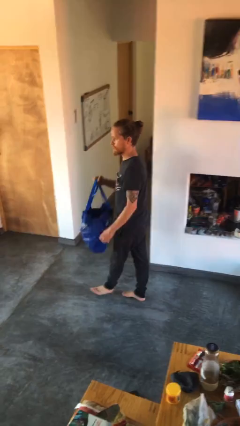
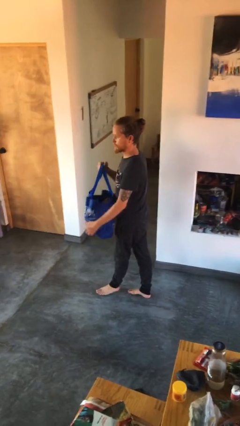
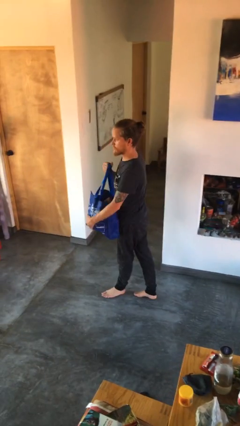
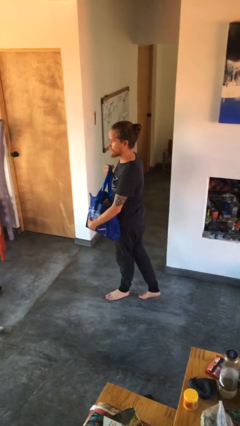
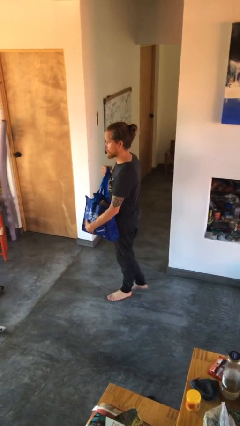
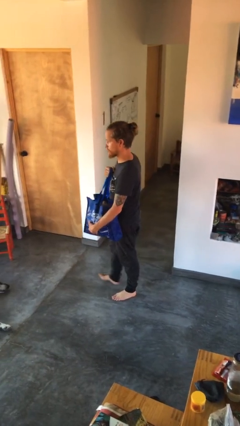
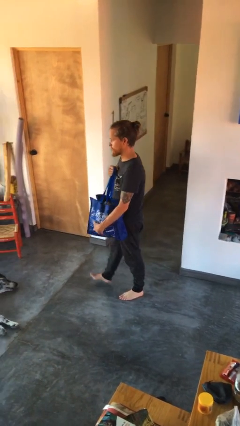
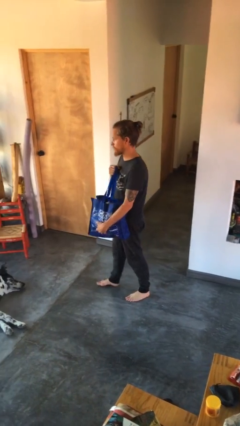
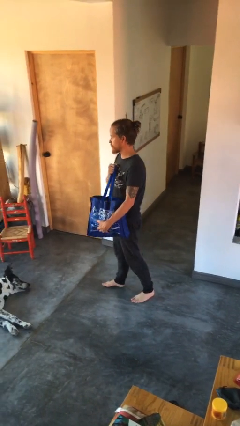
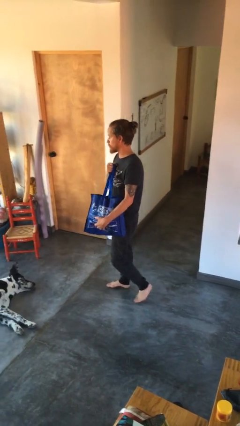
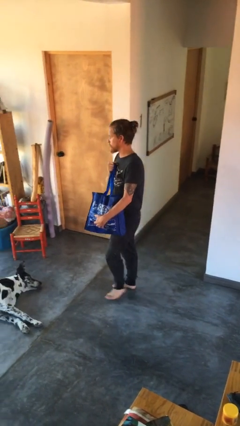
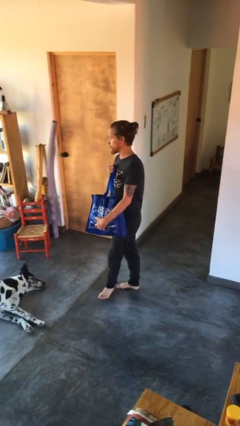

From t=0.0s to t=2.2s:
person carries groceries

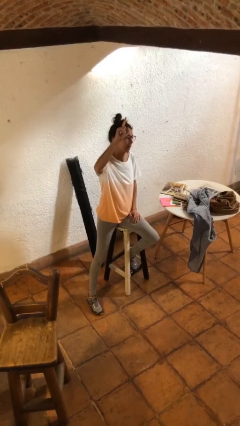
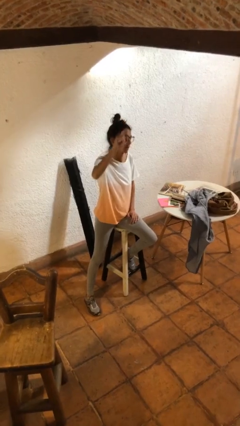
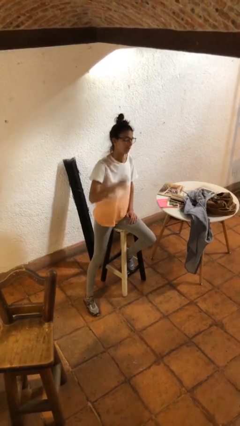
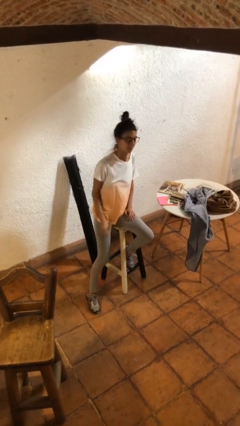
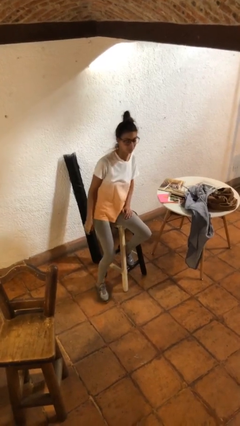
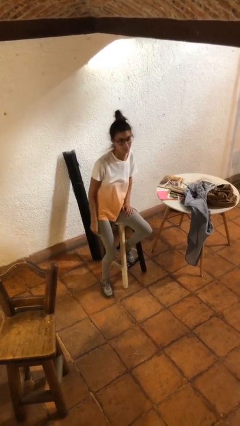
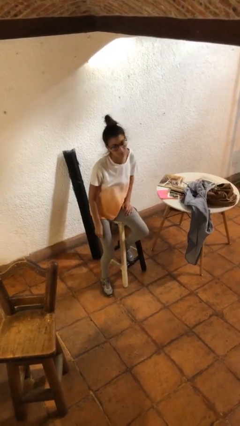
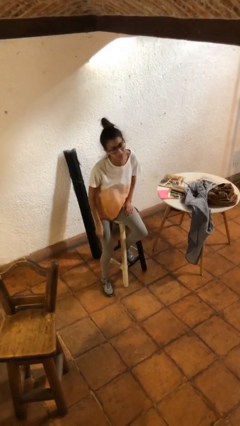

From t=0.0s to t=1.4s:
person gestures lower hand

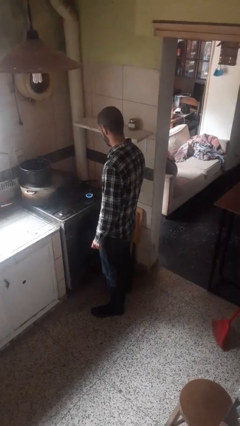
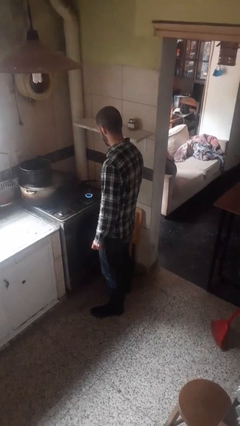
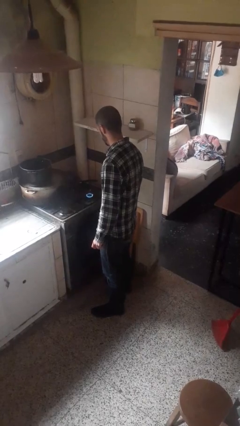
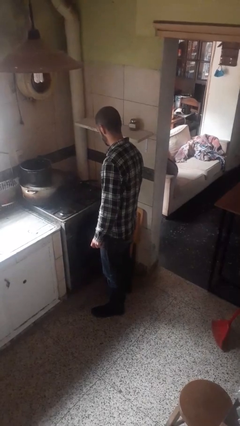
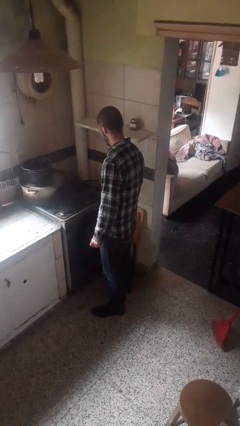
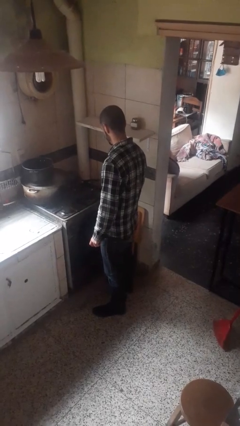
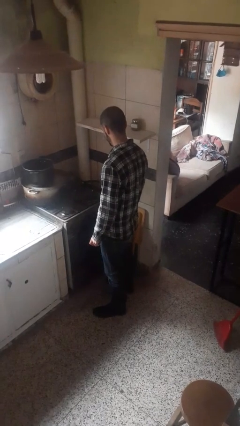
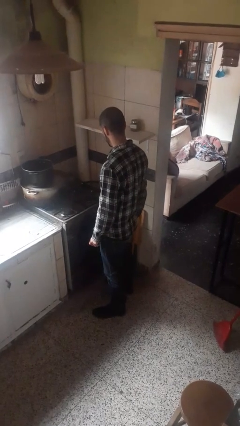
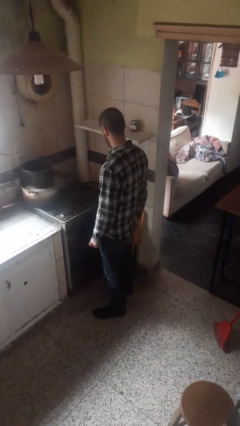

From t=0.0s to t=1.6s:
person turns off stovetop

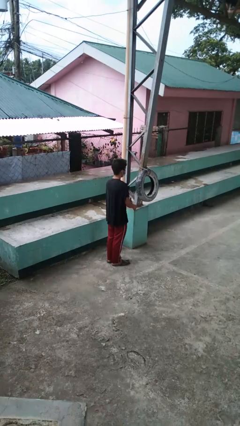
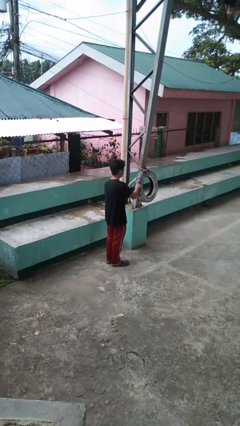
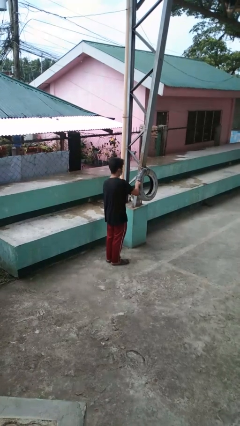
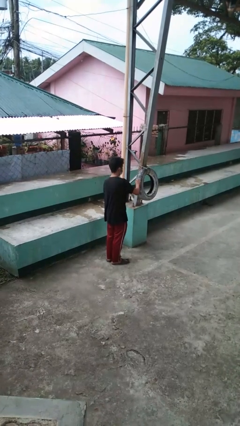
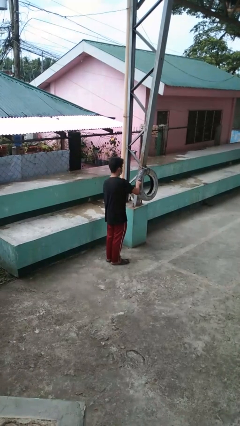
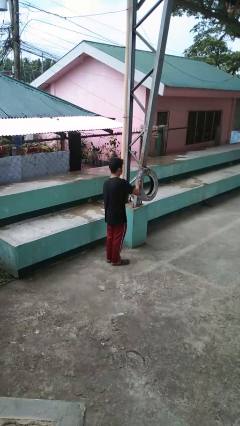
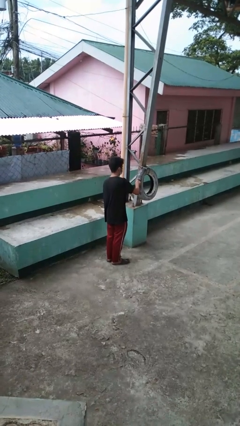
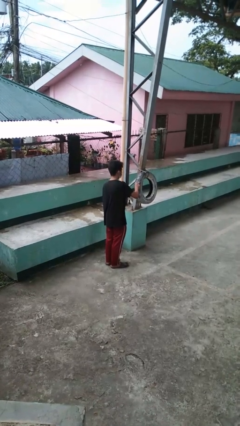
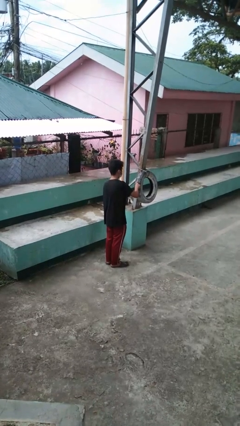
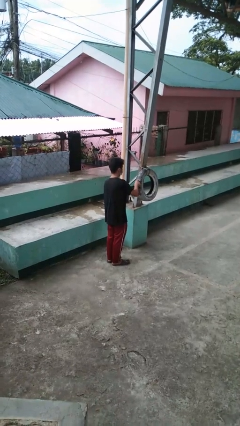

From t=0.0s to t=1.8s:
person taps object with finger

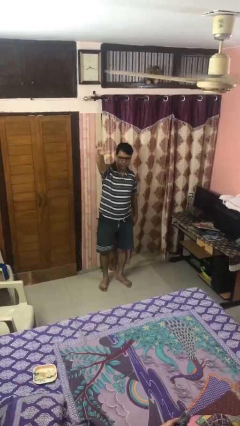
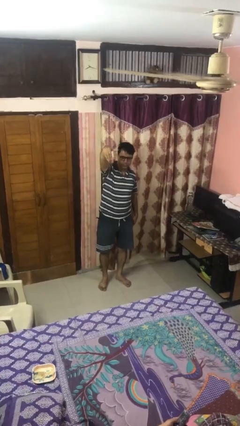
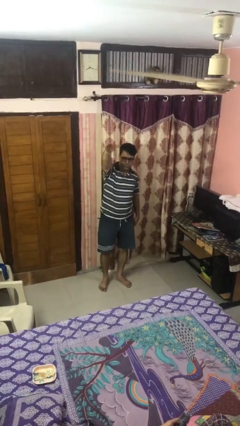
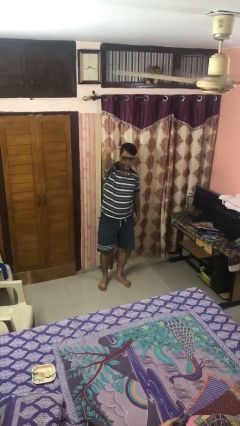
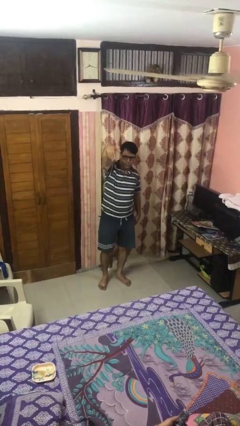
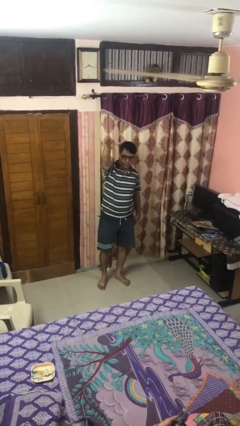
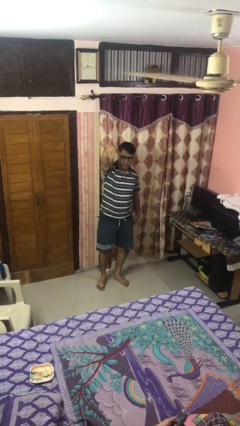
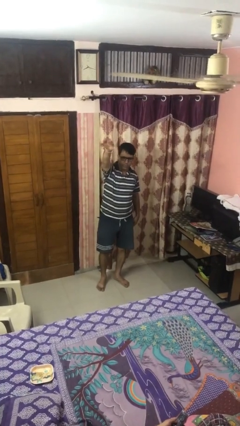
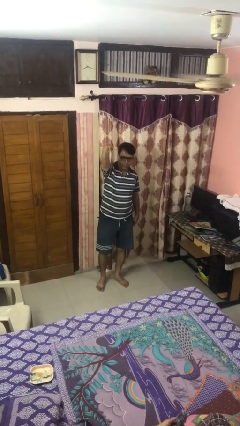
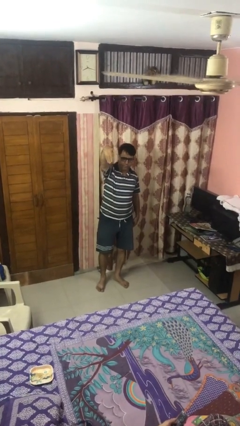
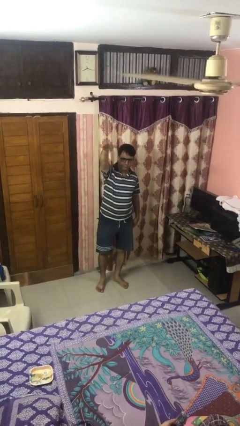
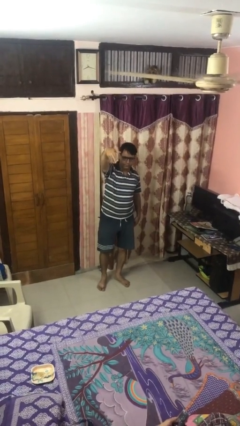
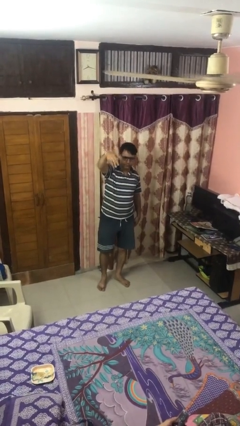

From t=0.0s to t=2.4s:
person gestures come here

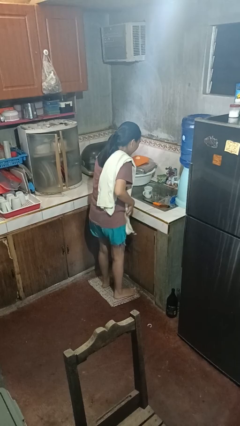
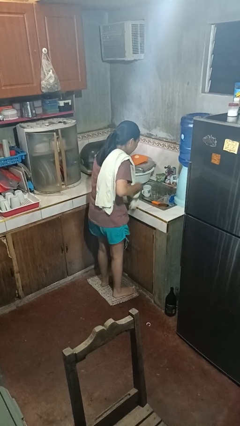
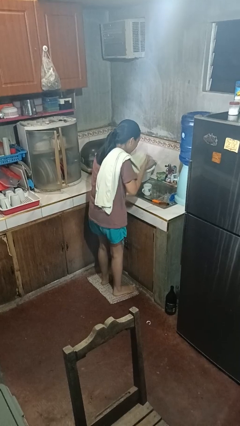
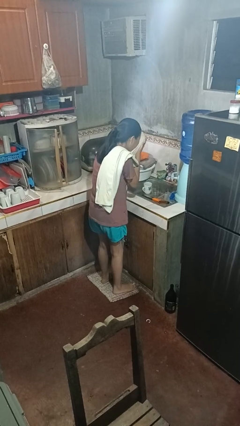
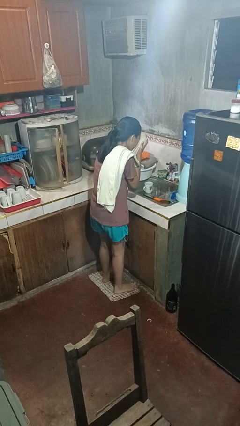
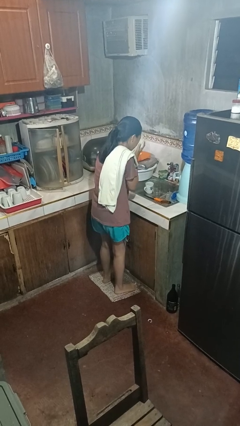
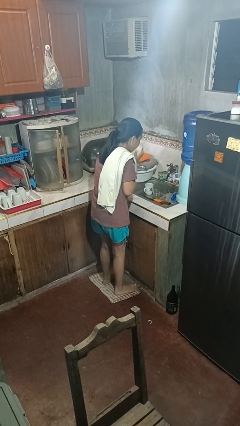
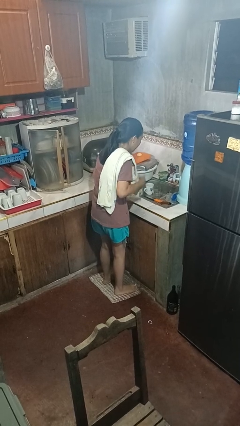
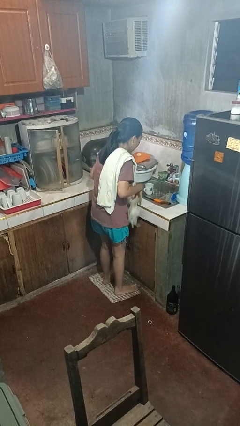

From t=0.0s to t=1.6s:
person dries face with towel

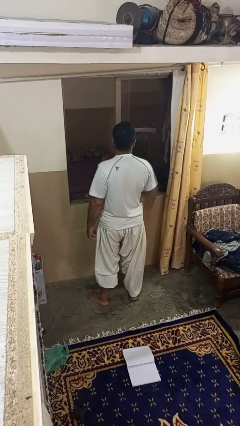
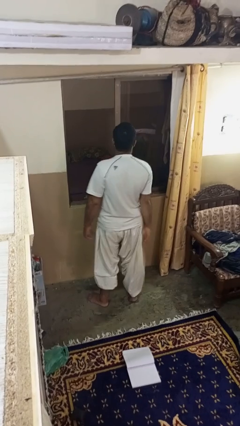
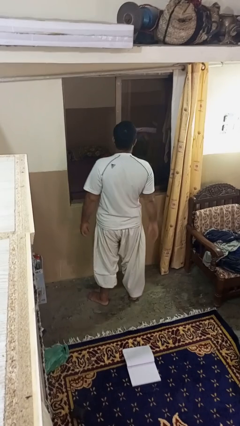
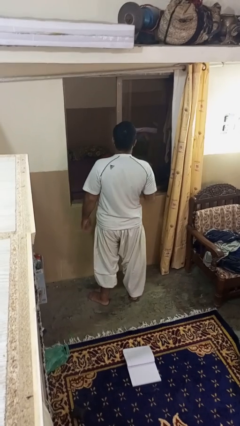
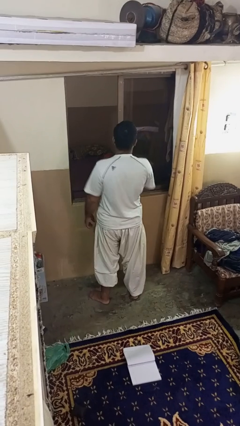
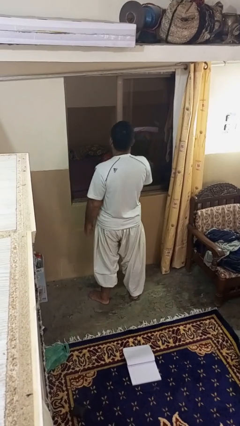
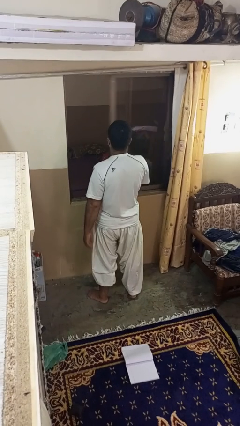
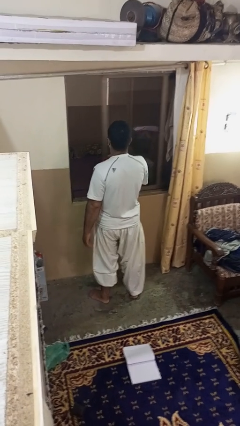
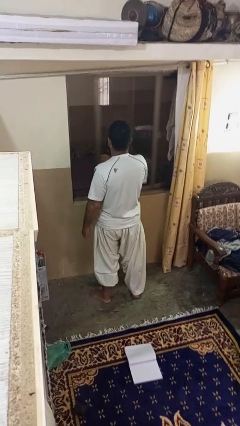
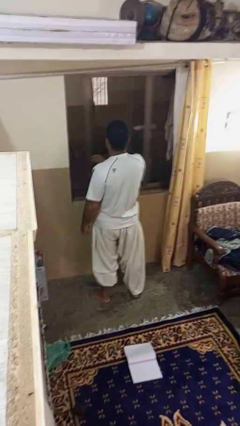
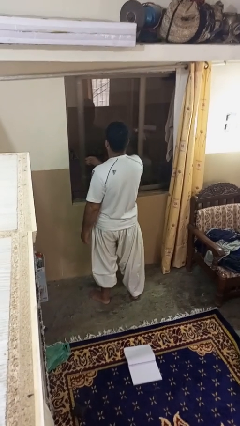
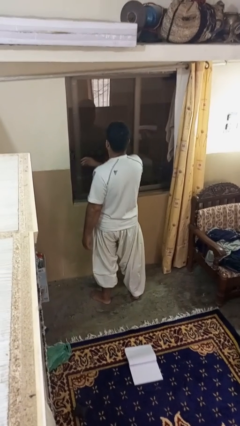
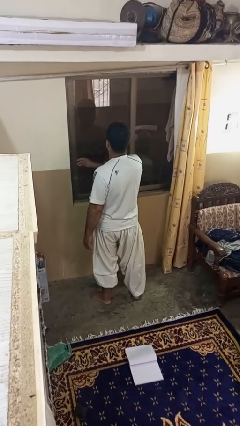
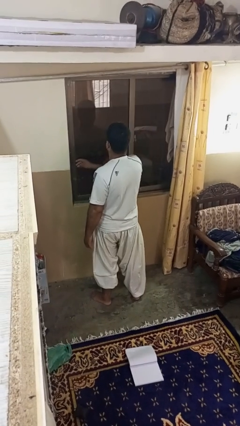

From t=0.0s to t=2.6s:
person closes home window

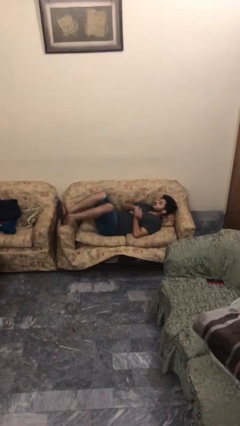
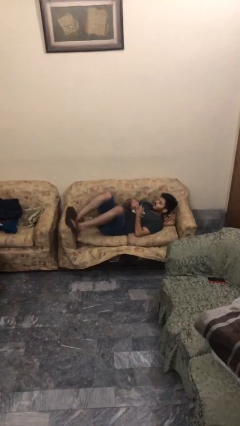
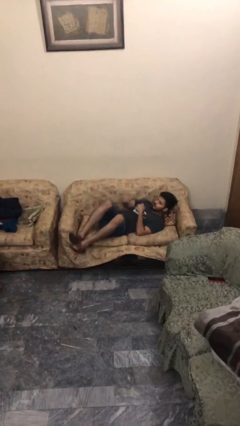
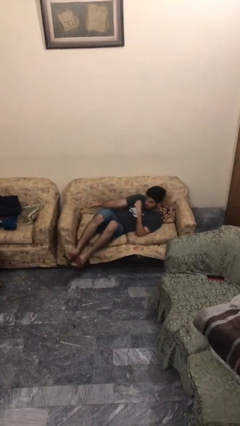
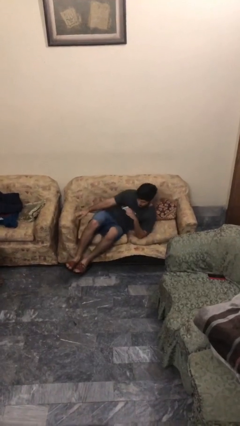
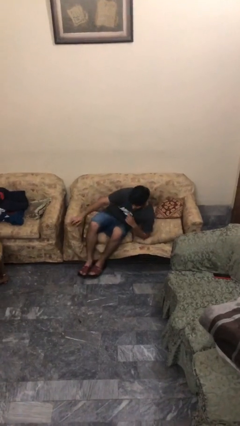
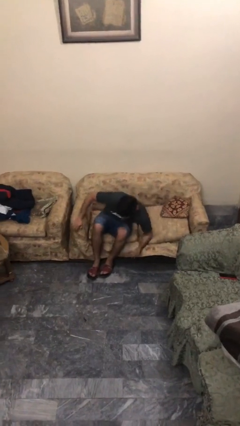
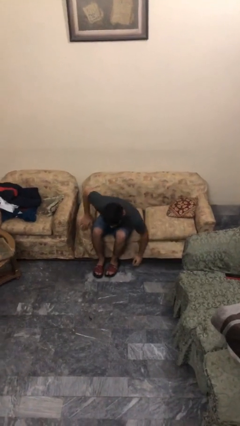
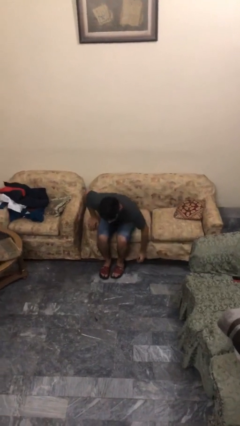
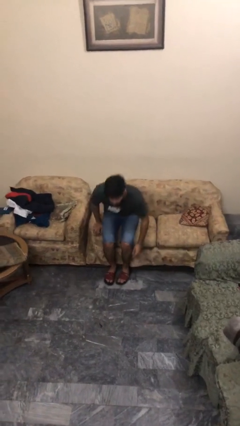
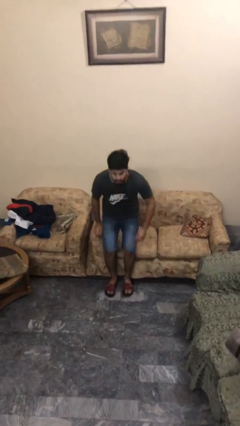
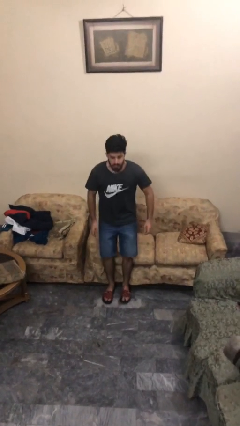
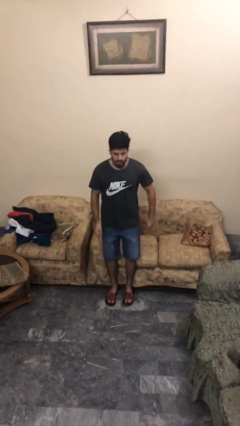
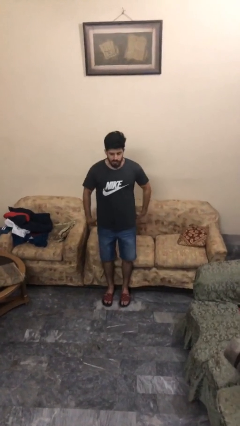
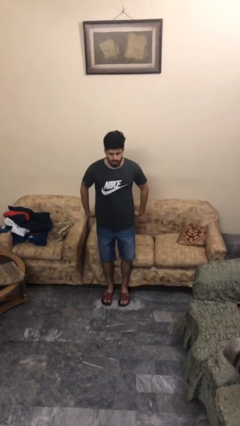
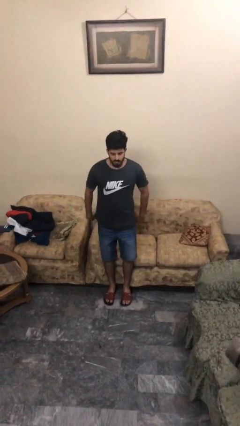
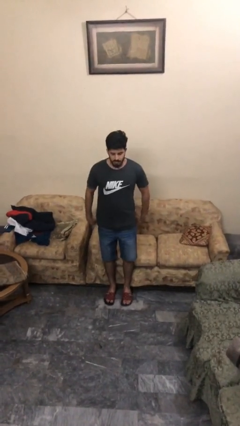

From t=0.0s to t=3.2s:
person stands up
